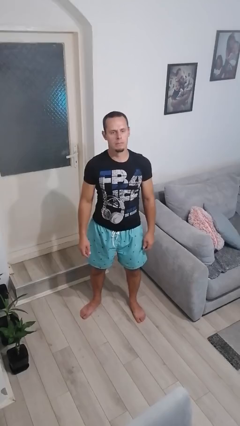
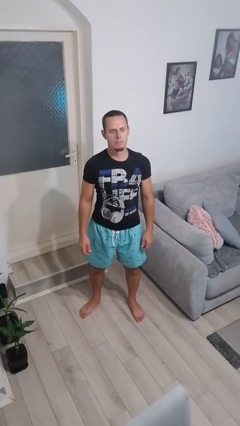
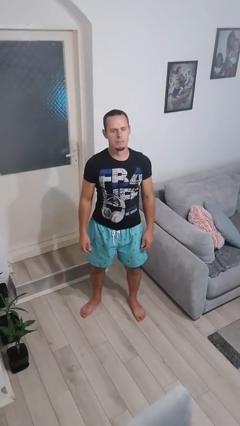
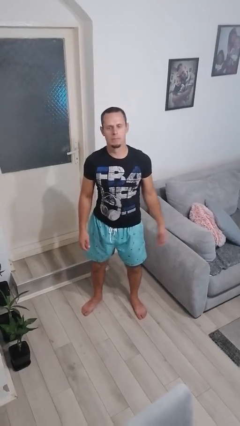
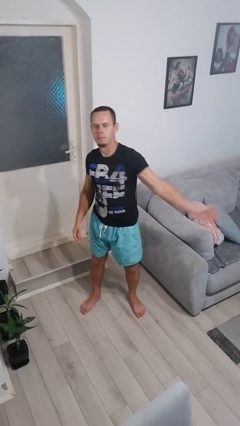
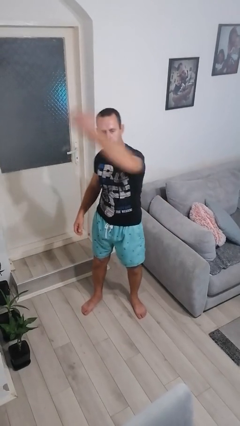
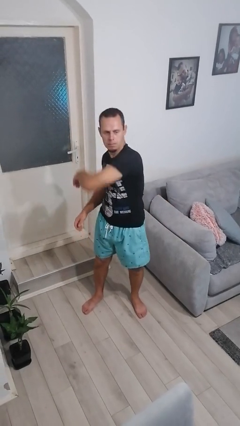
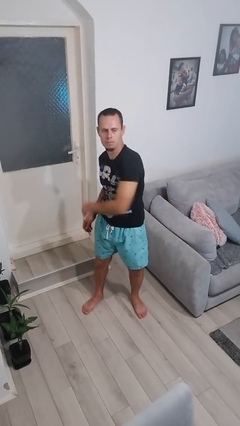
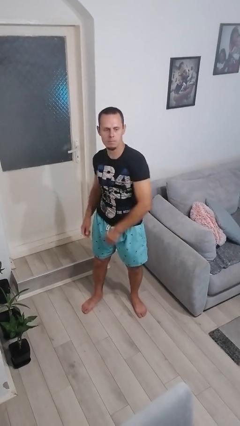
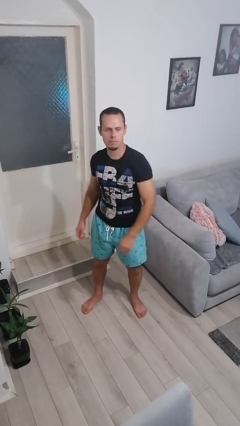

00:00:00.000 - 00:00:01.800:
person punches

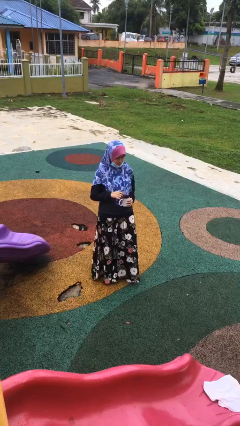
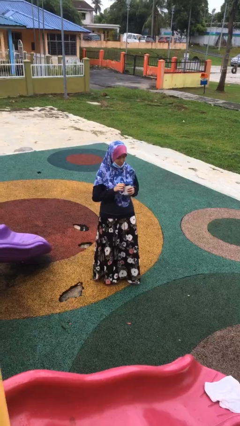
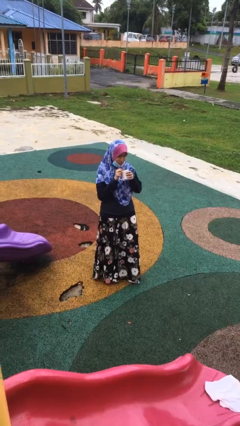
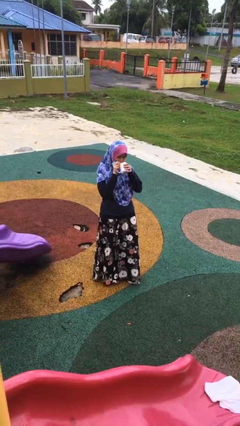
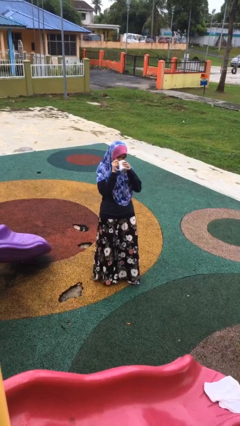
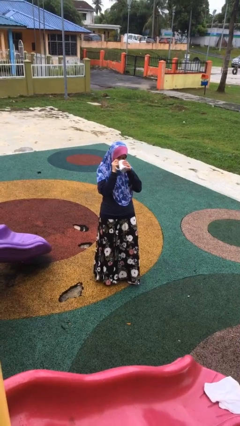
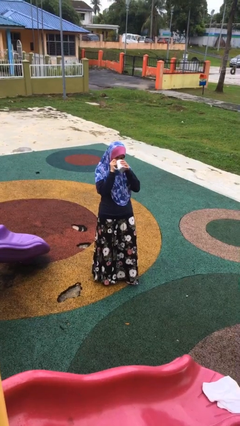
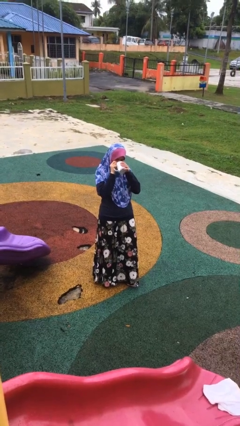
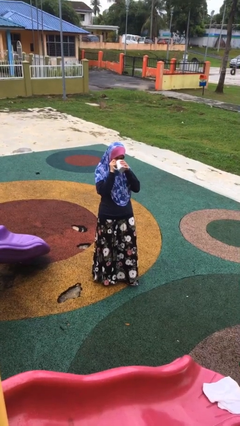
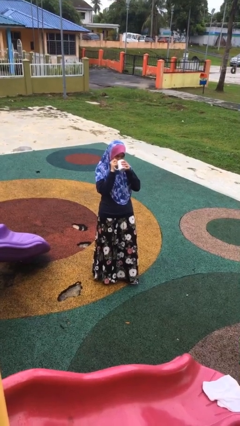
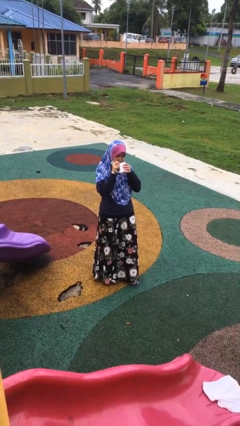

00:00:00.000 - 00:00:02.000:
person drinks from mug

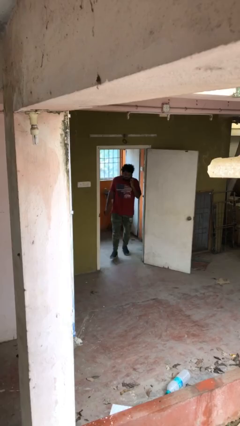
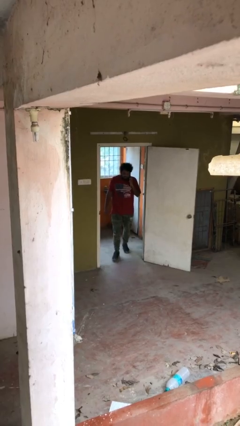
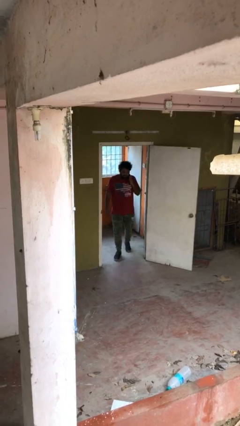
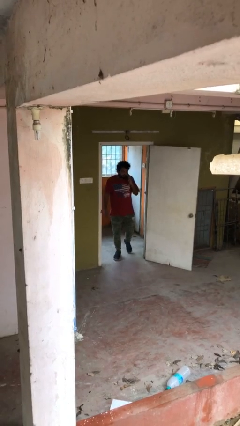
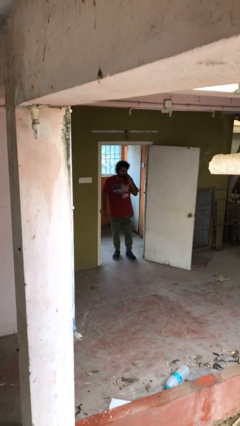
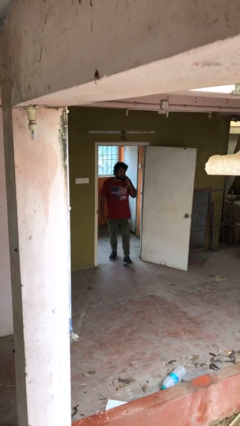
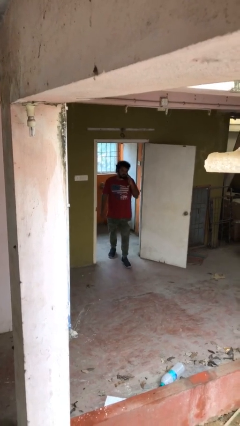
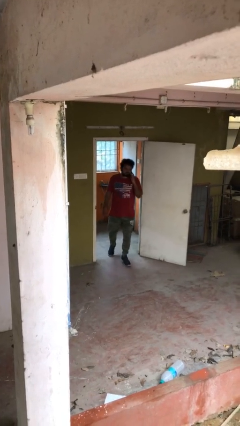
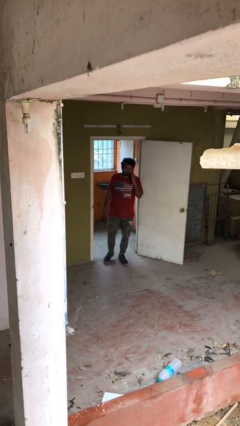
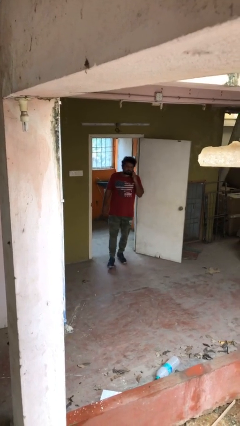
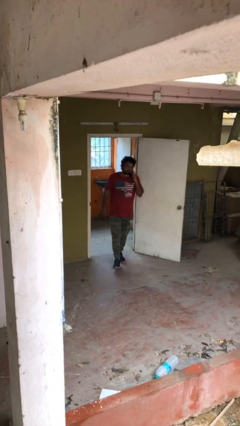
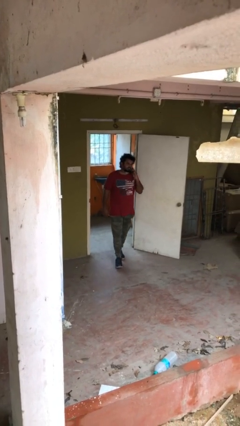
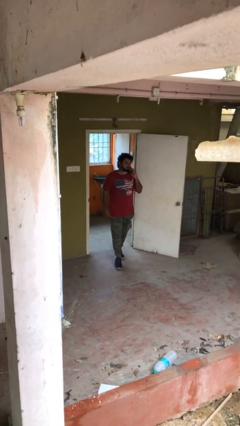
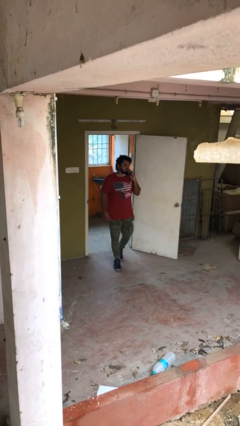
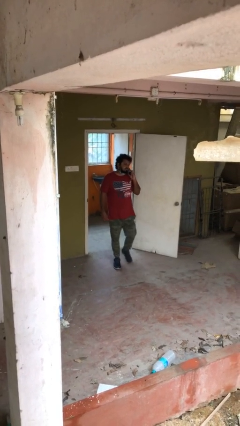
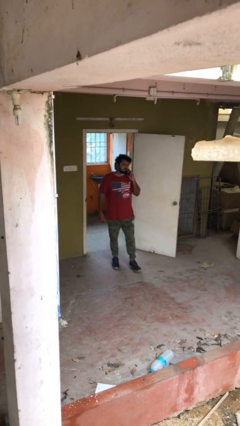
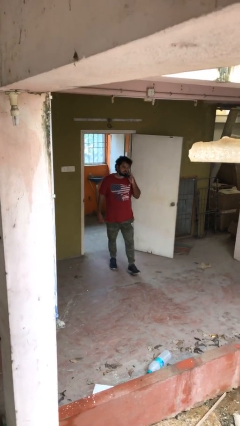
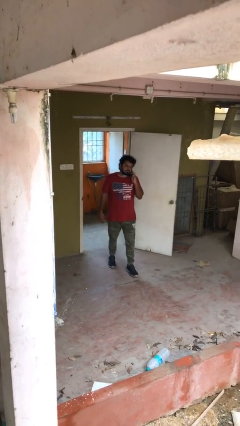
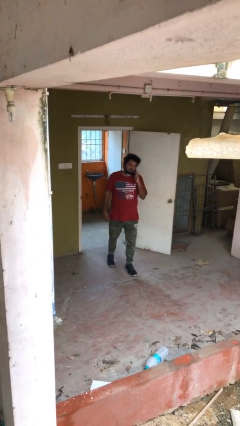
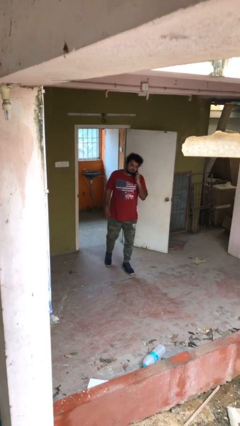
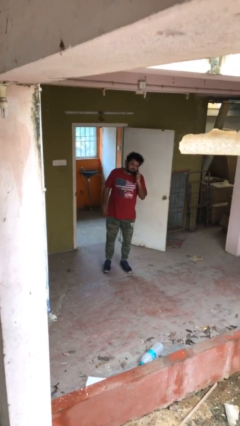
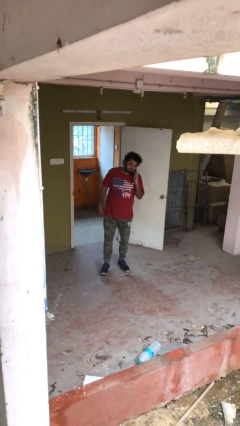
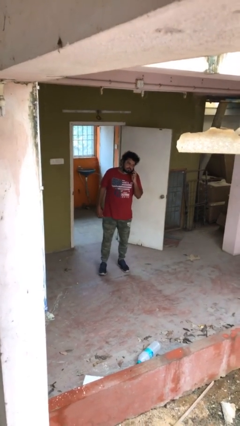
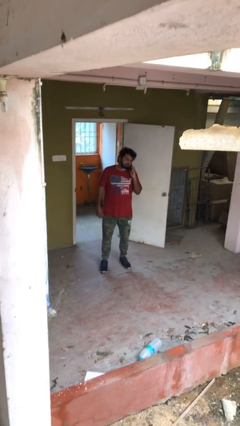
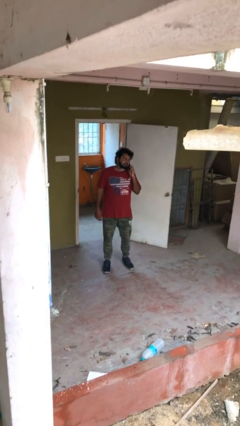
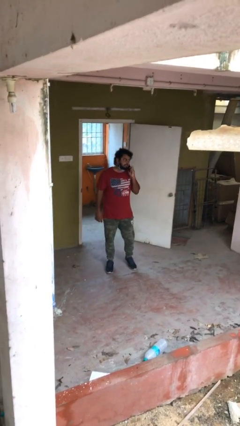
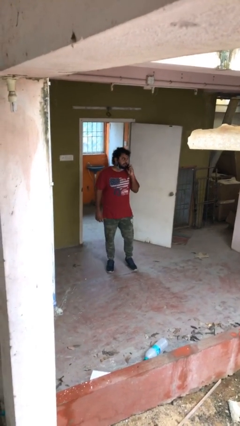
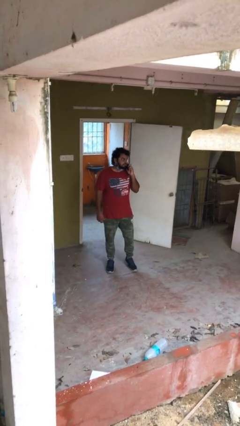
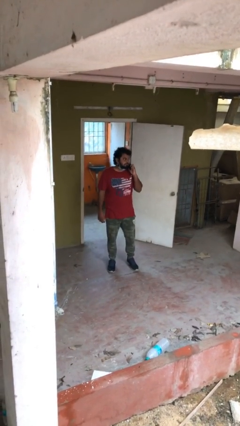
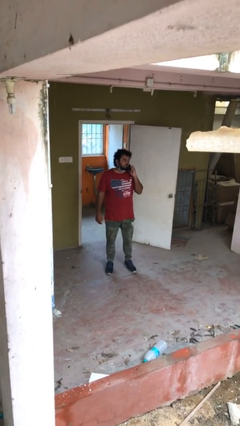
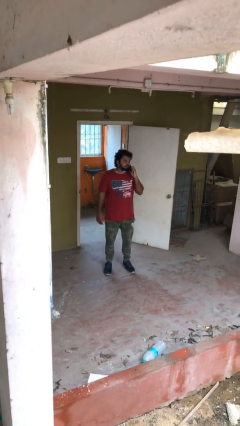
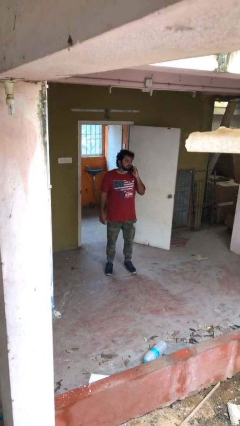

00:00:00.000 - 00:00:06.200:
person enters scene through structure

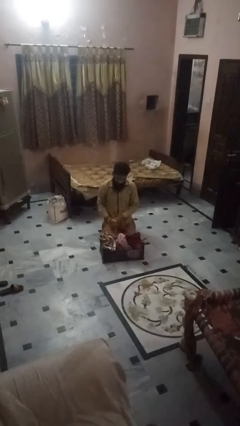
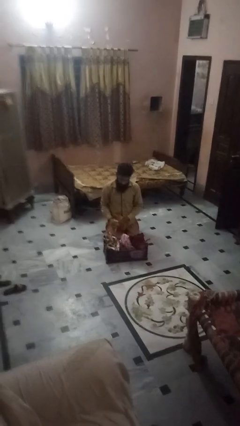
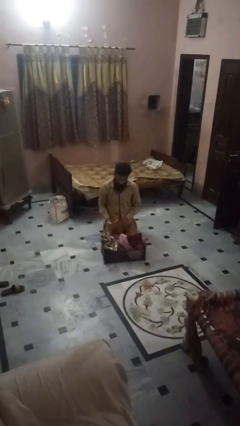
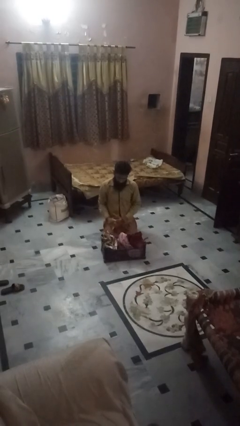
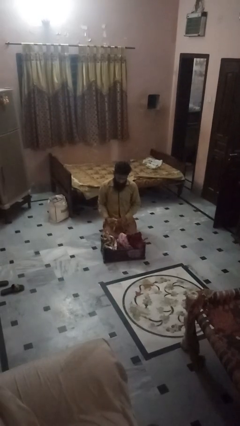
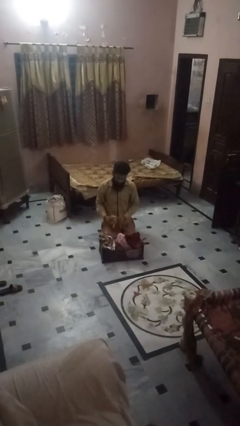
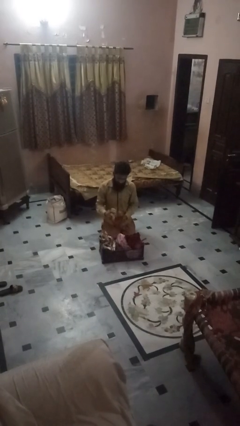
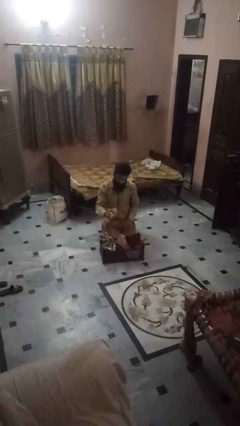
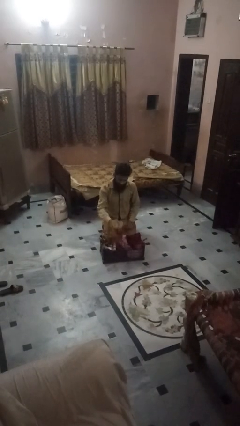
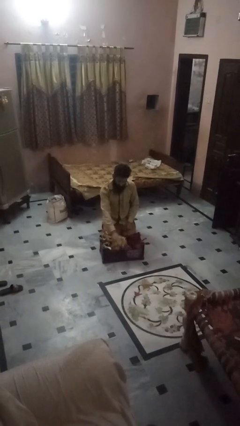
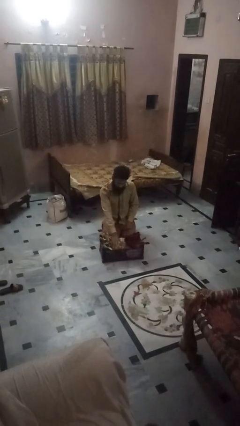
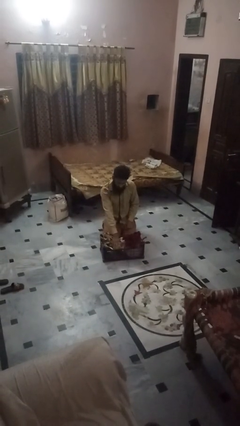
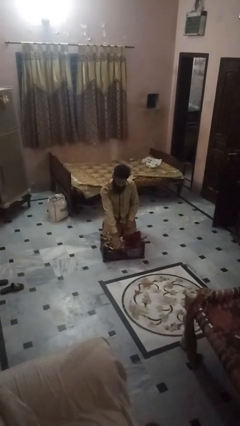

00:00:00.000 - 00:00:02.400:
person takes object from basket

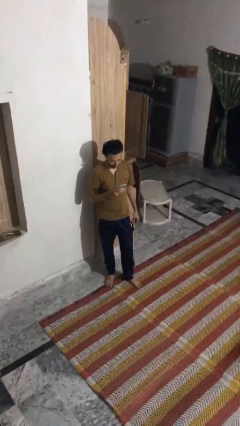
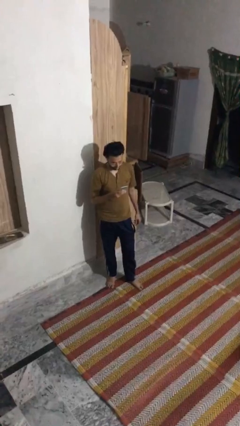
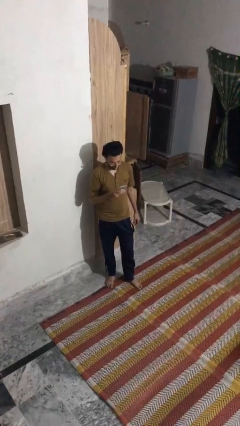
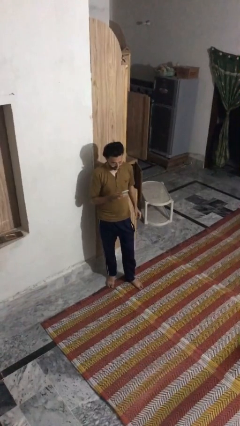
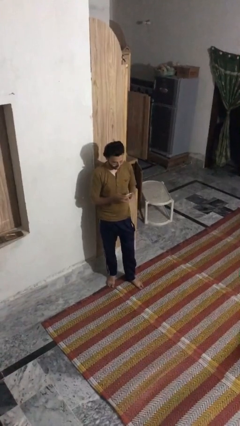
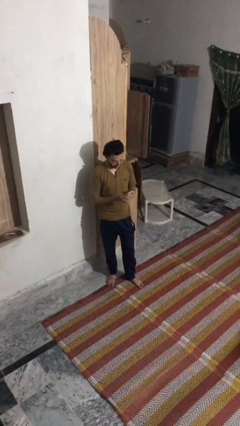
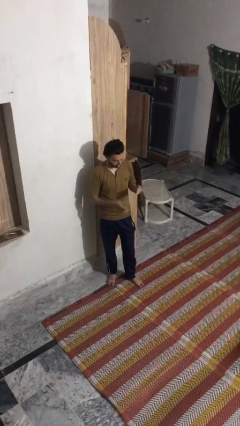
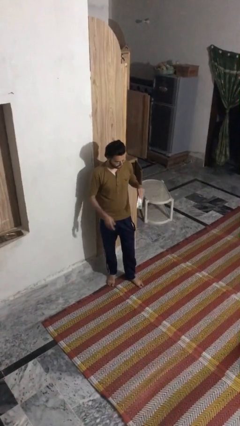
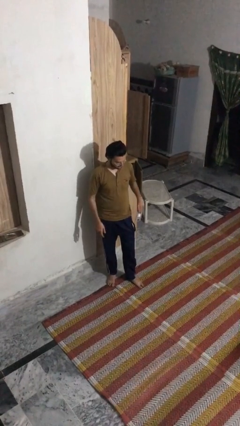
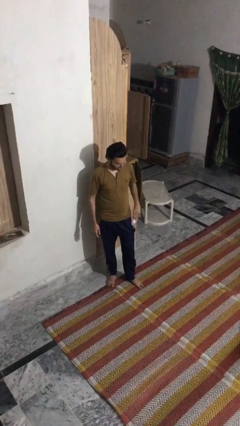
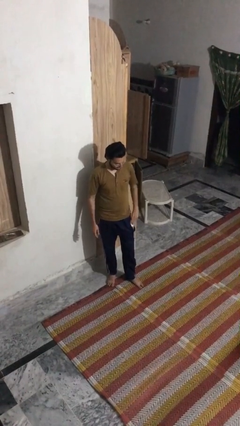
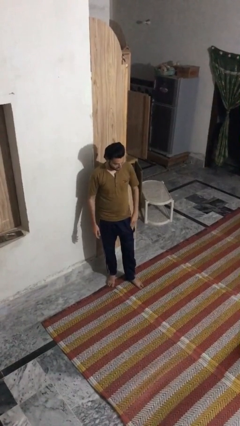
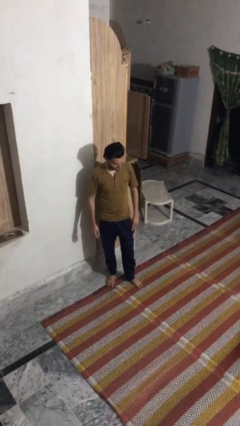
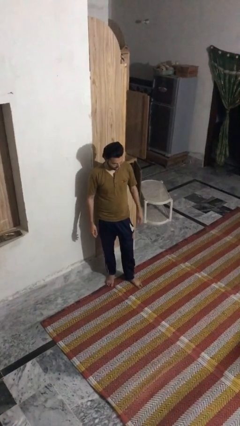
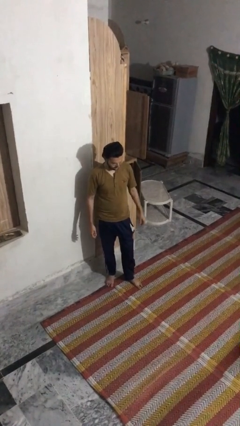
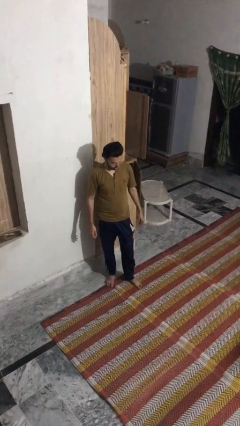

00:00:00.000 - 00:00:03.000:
person puts phone into pocket

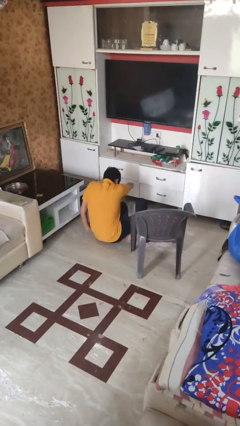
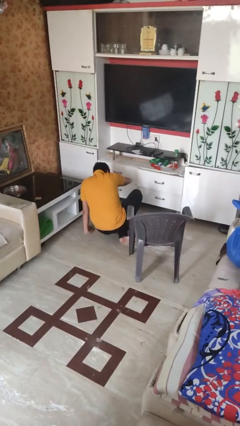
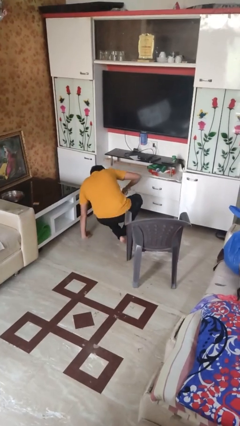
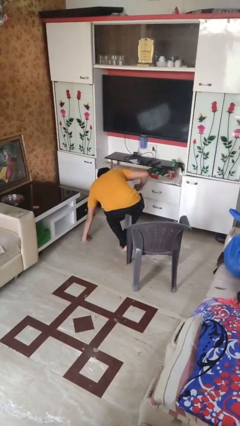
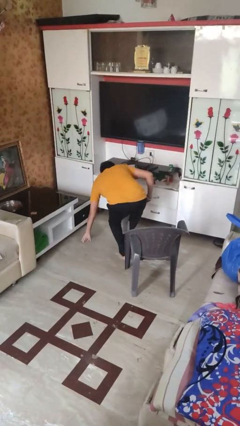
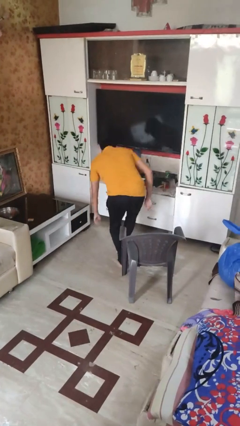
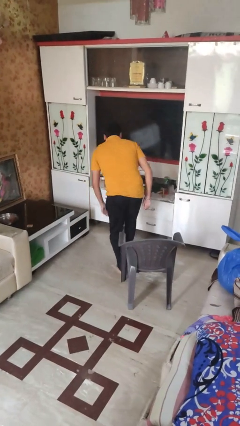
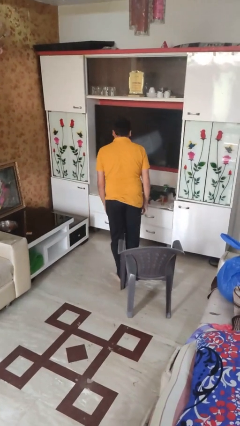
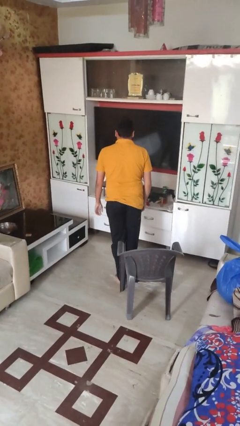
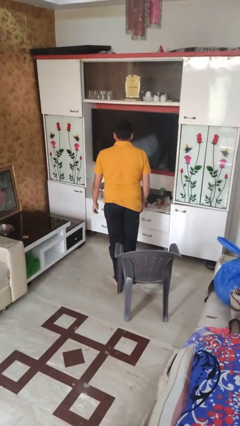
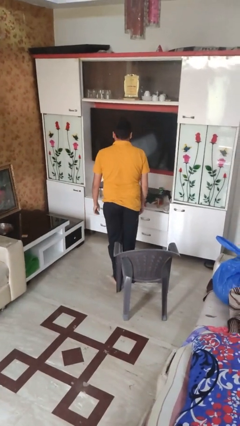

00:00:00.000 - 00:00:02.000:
person stands up from floor
